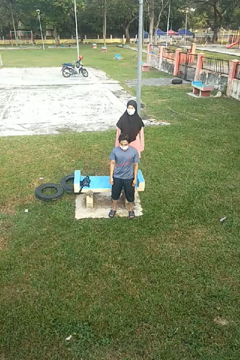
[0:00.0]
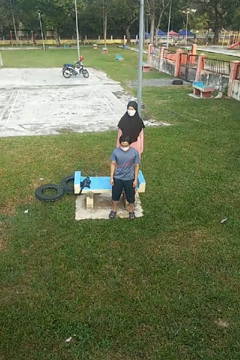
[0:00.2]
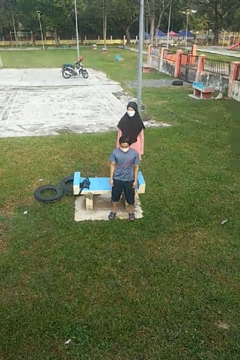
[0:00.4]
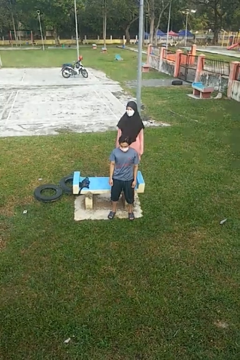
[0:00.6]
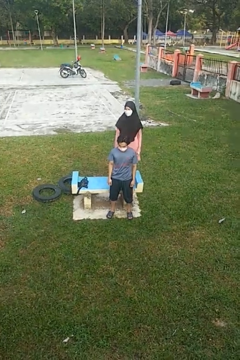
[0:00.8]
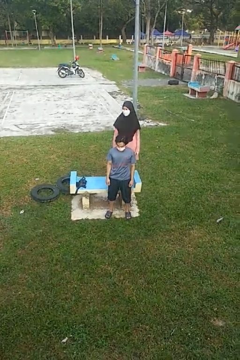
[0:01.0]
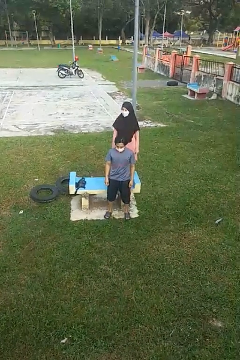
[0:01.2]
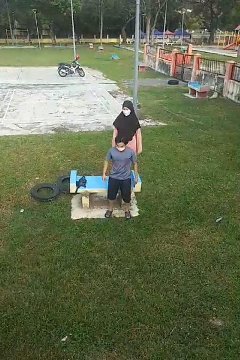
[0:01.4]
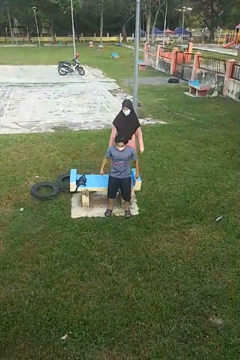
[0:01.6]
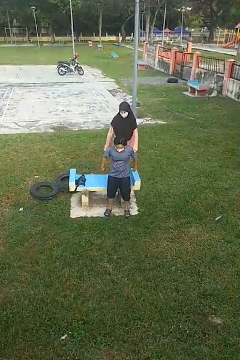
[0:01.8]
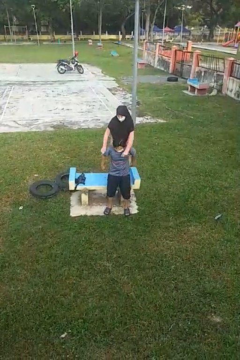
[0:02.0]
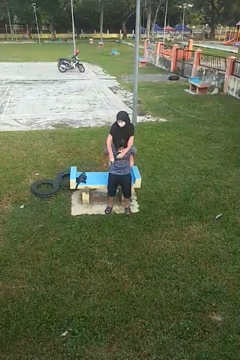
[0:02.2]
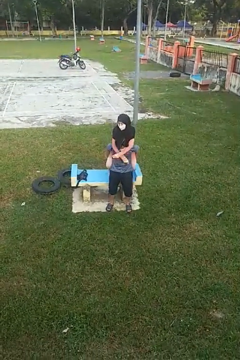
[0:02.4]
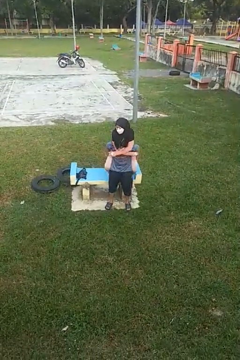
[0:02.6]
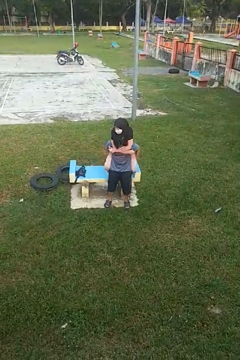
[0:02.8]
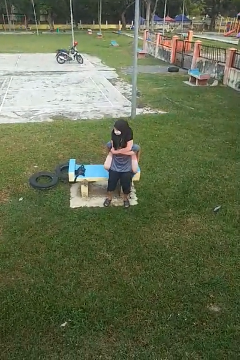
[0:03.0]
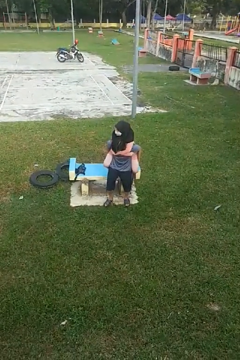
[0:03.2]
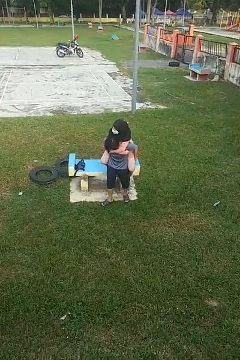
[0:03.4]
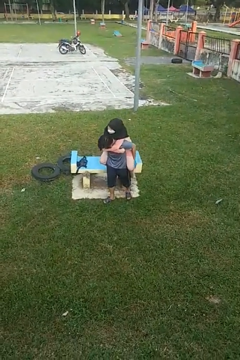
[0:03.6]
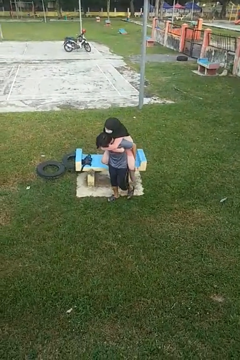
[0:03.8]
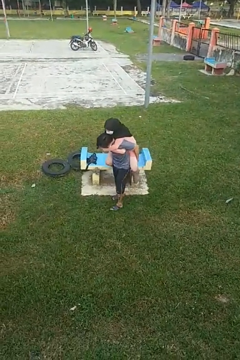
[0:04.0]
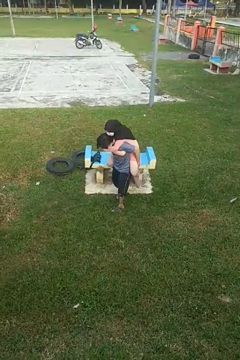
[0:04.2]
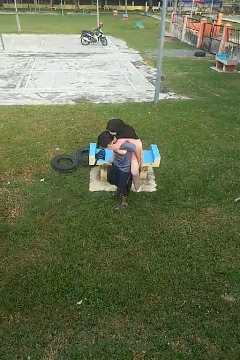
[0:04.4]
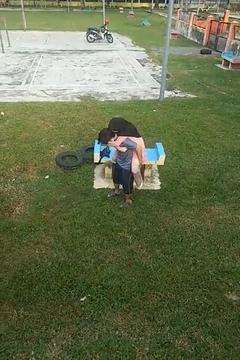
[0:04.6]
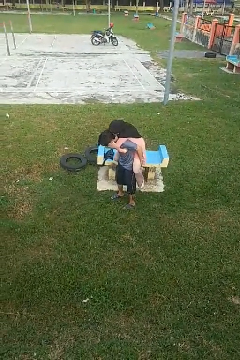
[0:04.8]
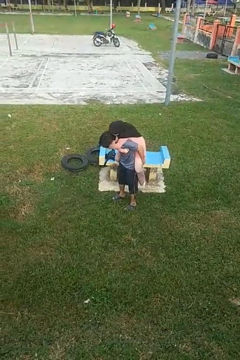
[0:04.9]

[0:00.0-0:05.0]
person carries person over shoulder

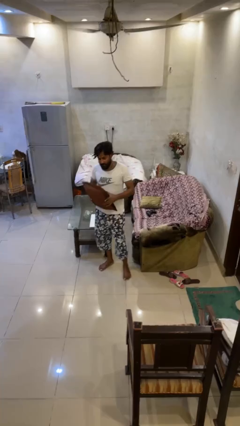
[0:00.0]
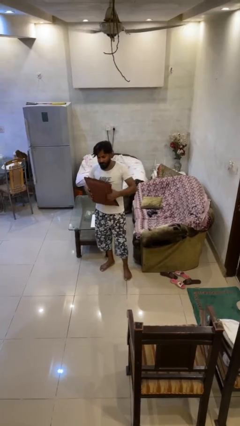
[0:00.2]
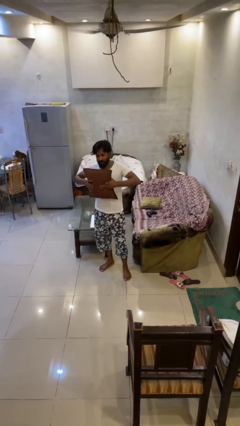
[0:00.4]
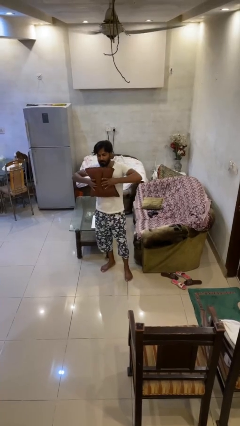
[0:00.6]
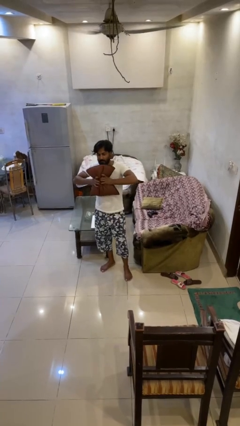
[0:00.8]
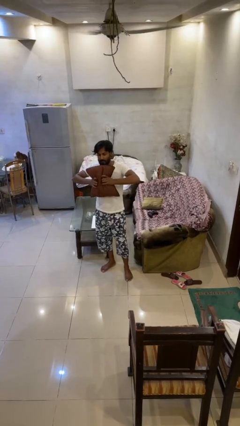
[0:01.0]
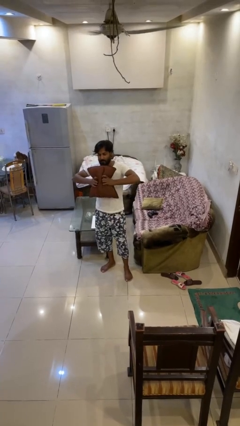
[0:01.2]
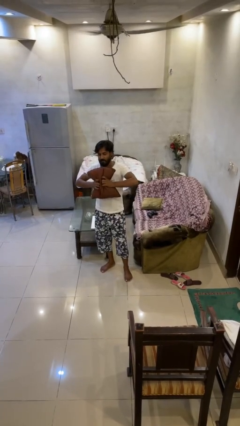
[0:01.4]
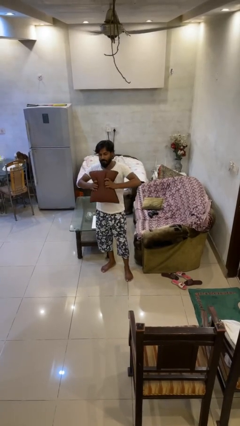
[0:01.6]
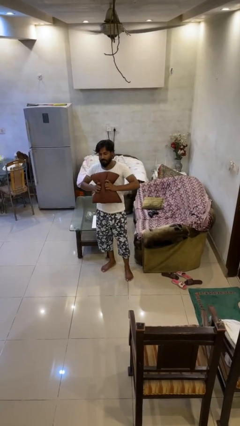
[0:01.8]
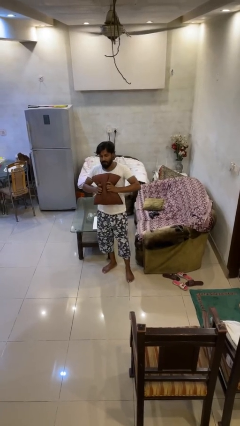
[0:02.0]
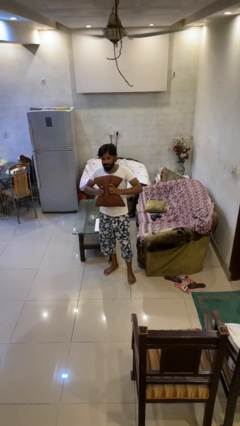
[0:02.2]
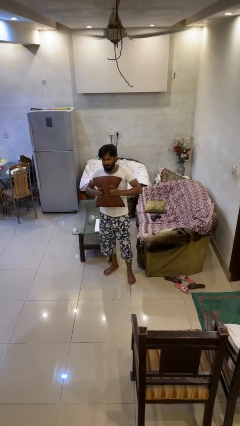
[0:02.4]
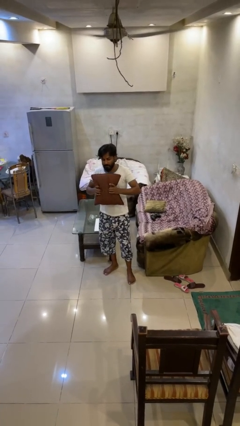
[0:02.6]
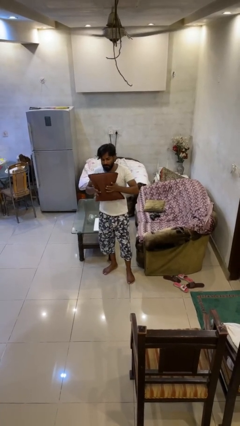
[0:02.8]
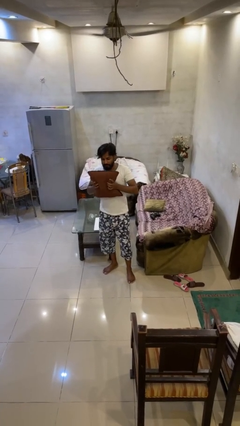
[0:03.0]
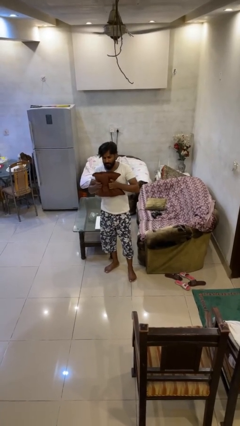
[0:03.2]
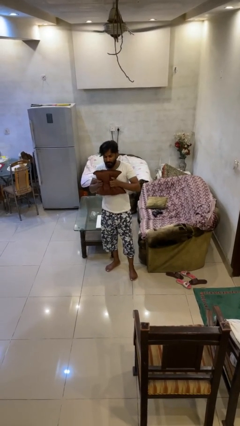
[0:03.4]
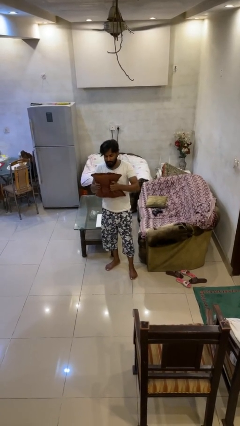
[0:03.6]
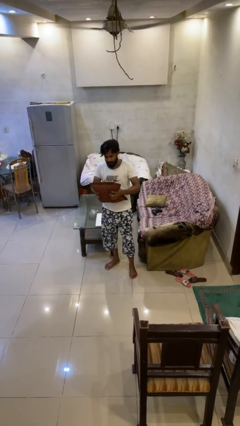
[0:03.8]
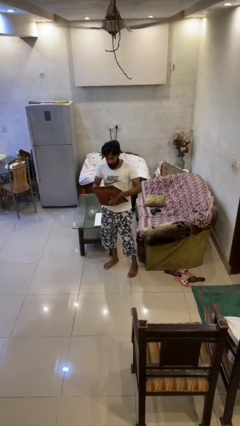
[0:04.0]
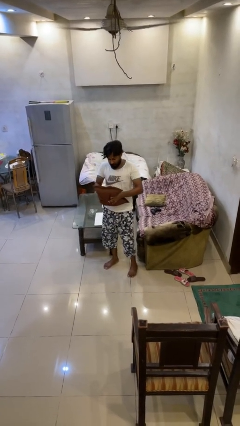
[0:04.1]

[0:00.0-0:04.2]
person squeezes object

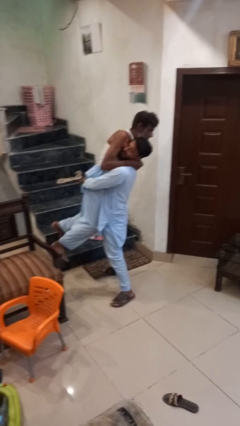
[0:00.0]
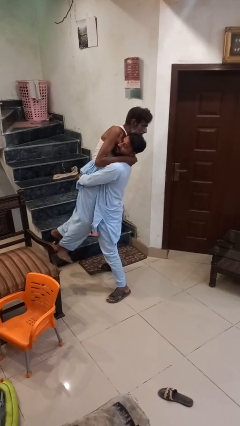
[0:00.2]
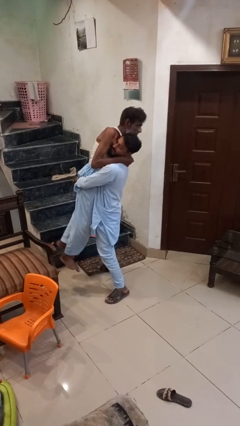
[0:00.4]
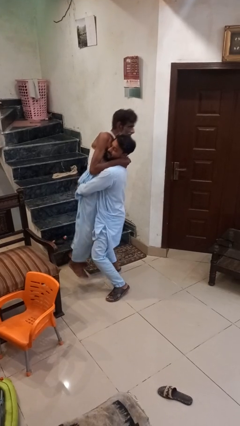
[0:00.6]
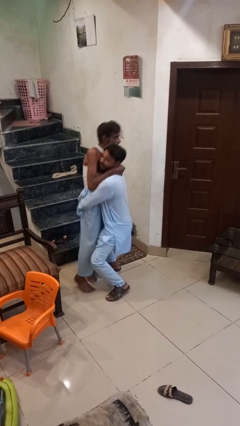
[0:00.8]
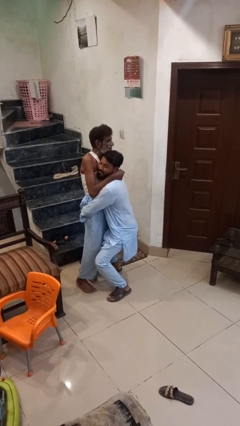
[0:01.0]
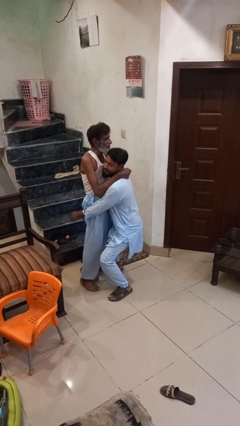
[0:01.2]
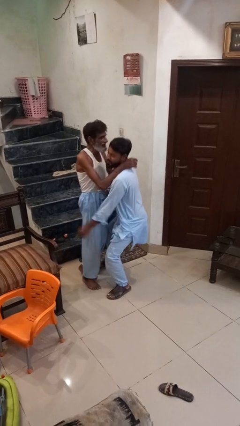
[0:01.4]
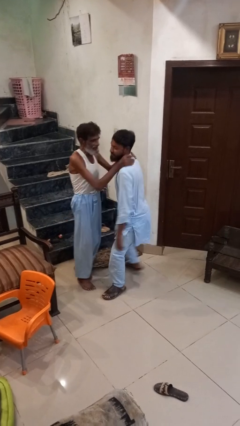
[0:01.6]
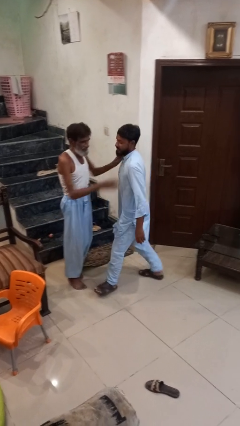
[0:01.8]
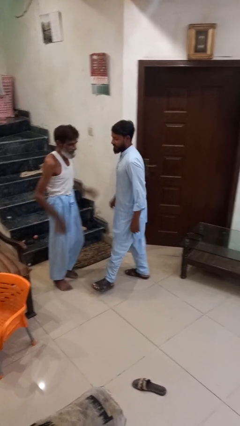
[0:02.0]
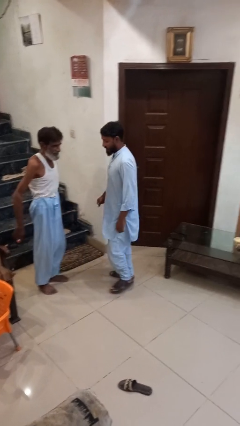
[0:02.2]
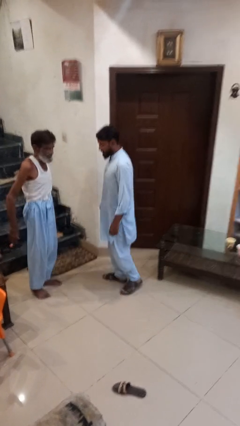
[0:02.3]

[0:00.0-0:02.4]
person puts down person

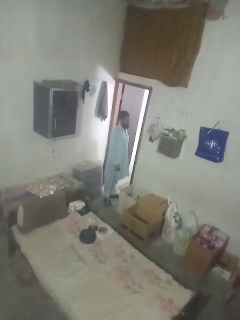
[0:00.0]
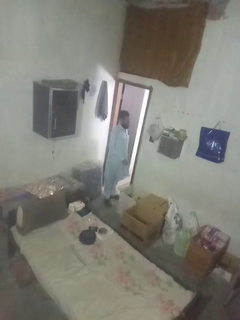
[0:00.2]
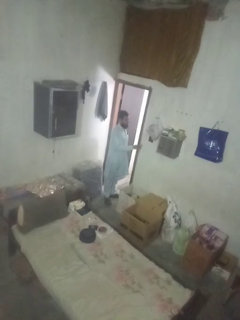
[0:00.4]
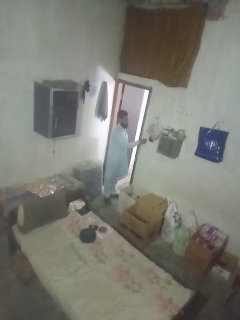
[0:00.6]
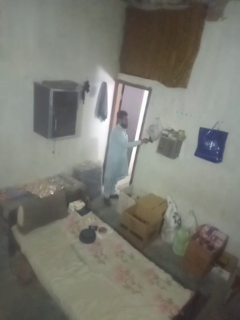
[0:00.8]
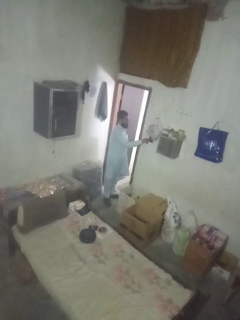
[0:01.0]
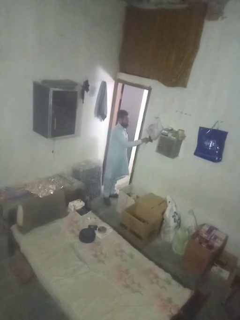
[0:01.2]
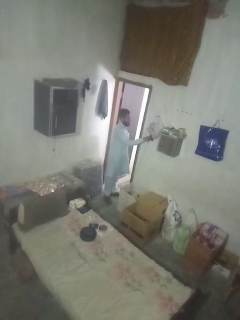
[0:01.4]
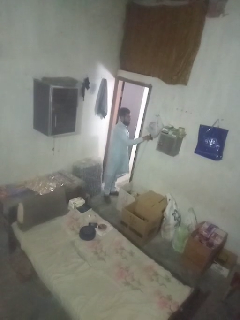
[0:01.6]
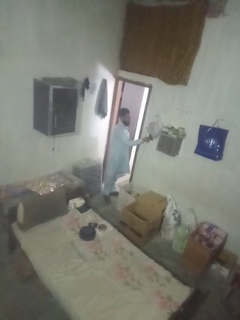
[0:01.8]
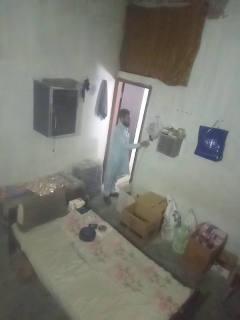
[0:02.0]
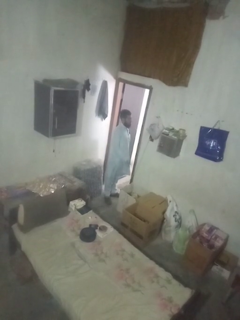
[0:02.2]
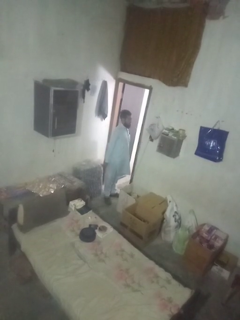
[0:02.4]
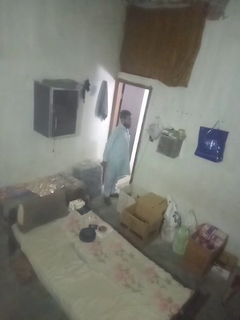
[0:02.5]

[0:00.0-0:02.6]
person plugs into electrical socket

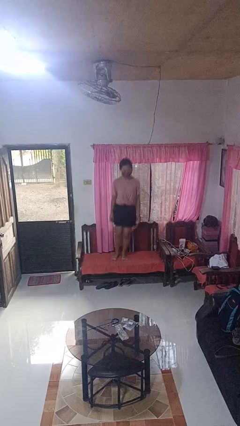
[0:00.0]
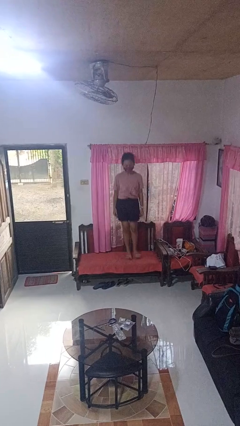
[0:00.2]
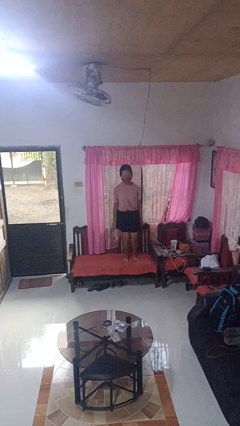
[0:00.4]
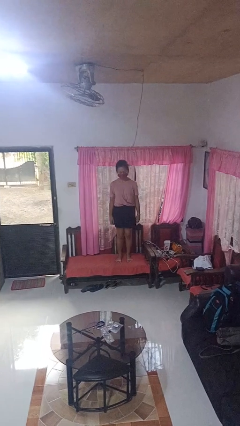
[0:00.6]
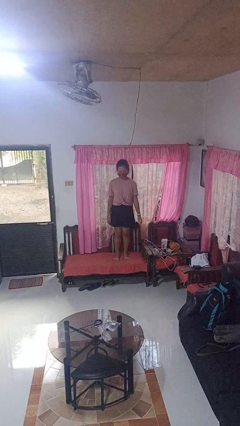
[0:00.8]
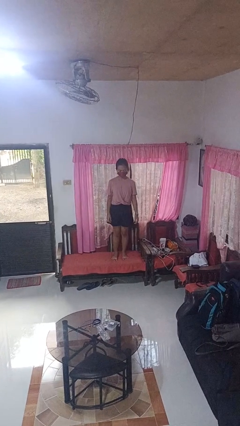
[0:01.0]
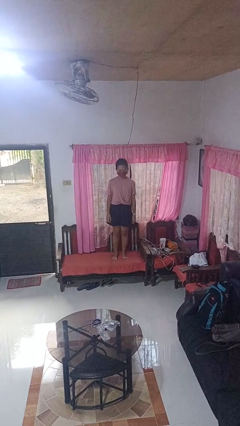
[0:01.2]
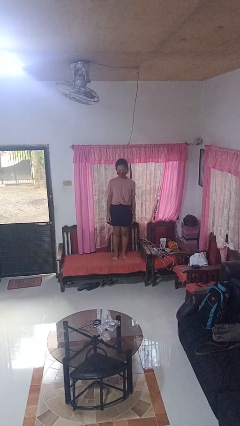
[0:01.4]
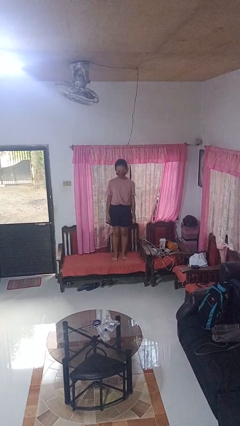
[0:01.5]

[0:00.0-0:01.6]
person jumps on couch

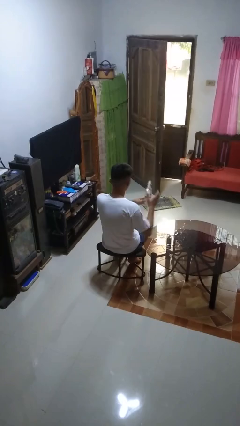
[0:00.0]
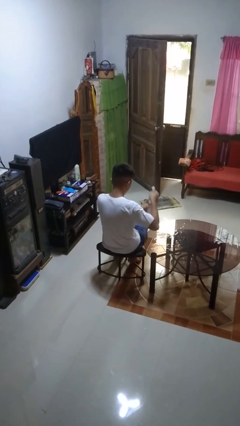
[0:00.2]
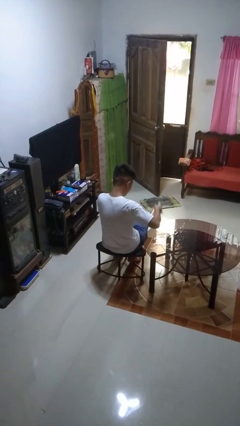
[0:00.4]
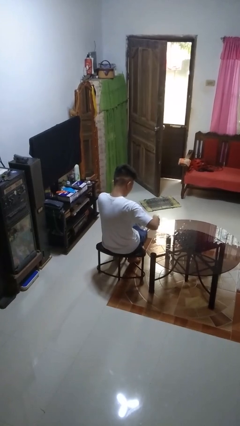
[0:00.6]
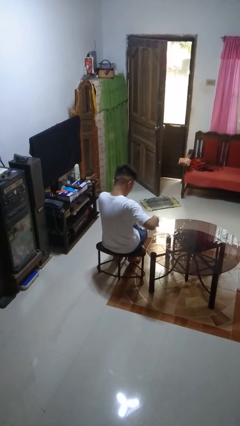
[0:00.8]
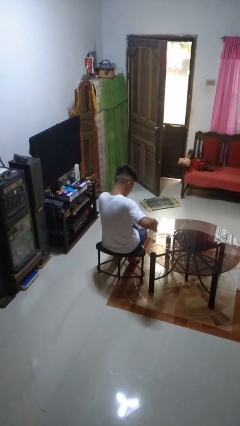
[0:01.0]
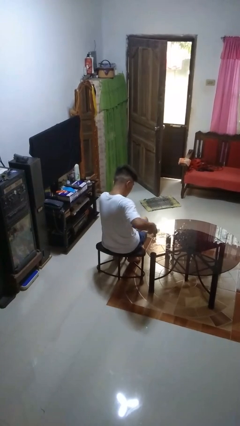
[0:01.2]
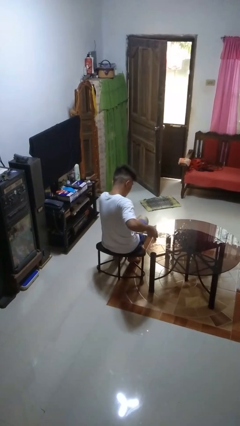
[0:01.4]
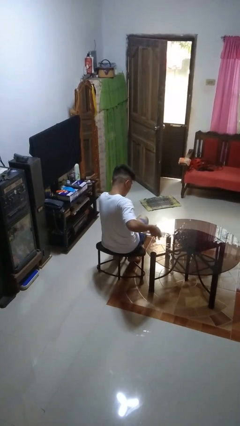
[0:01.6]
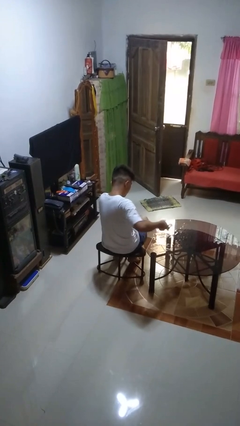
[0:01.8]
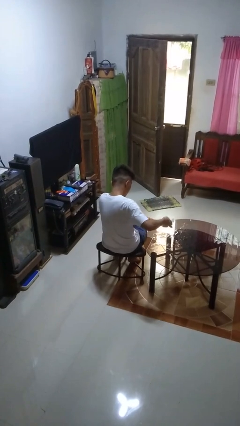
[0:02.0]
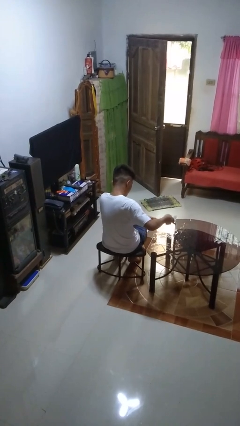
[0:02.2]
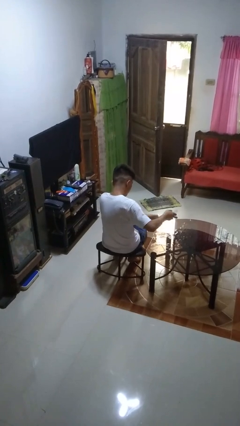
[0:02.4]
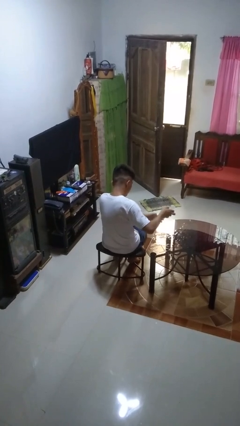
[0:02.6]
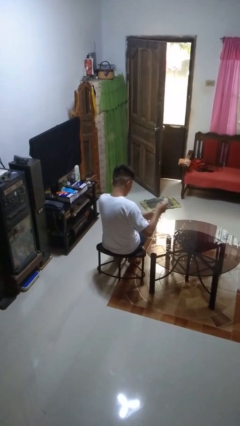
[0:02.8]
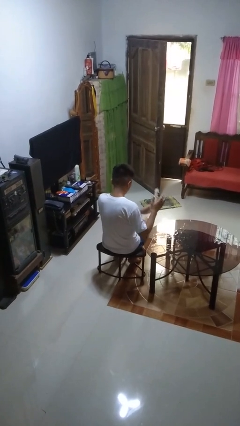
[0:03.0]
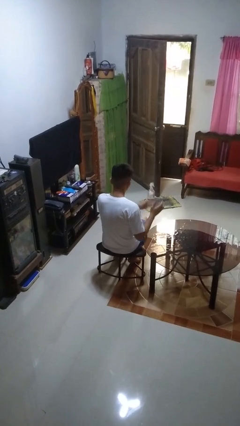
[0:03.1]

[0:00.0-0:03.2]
person sprays from bottle
